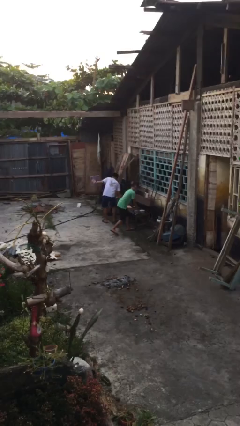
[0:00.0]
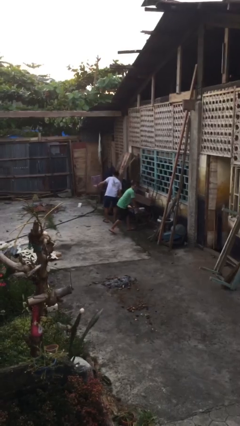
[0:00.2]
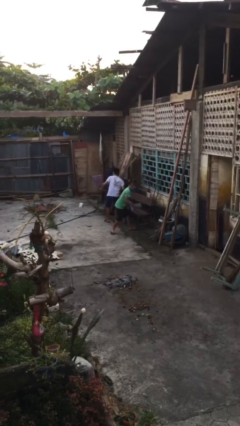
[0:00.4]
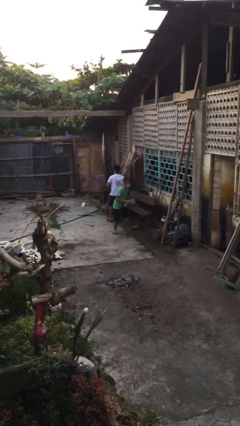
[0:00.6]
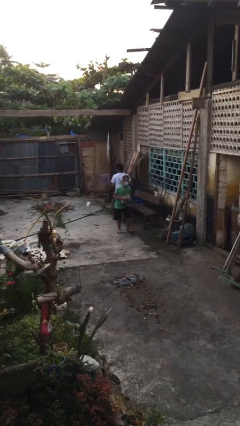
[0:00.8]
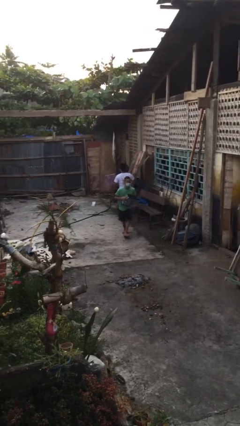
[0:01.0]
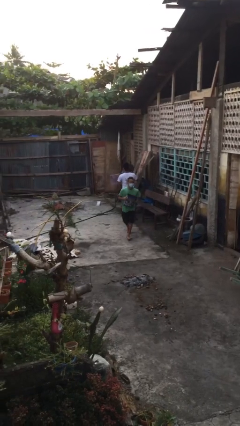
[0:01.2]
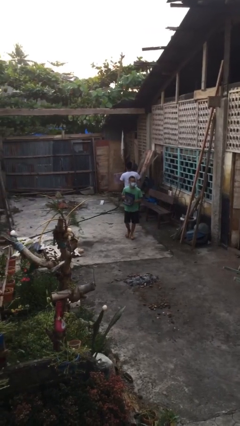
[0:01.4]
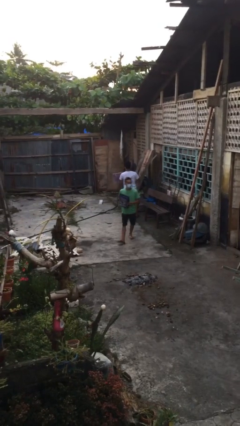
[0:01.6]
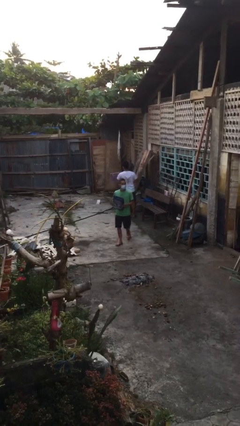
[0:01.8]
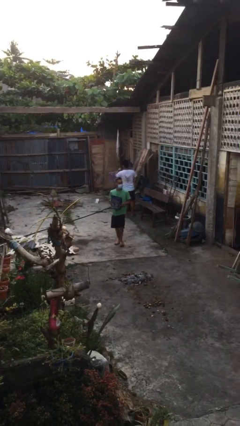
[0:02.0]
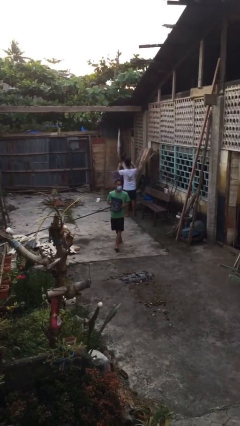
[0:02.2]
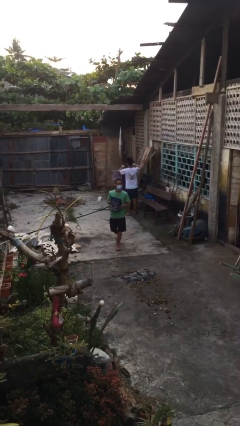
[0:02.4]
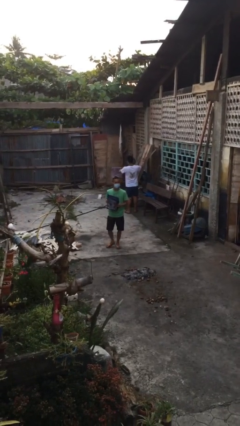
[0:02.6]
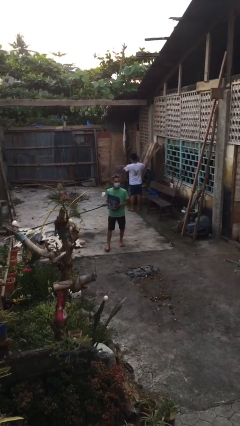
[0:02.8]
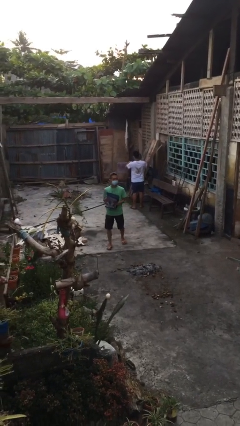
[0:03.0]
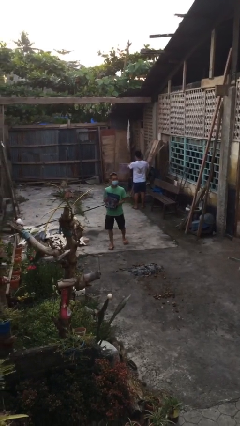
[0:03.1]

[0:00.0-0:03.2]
person steals object from person

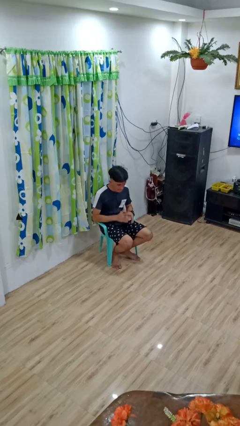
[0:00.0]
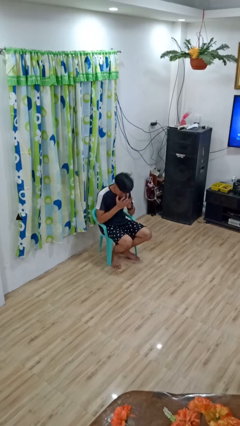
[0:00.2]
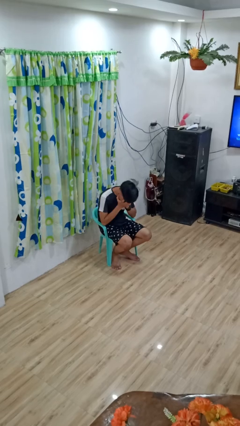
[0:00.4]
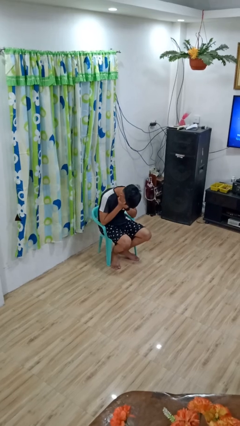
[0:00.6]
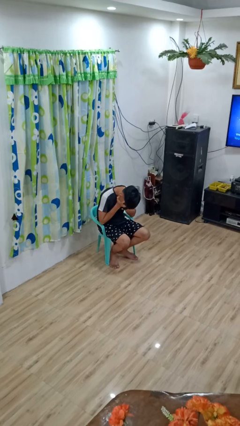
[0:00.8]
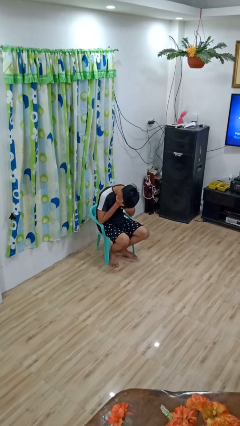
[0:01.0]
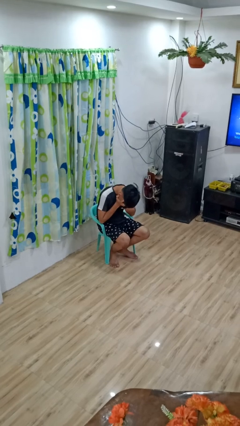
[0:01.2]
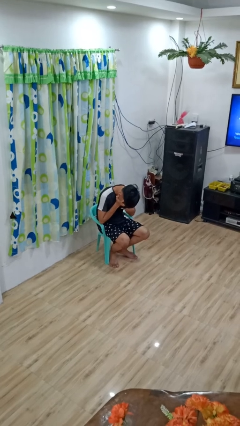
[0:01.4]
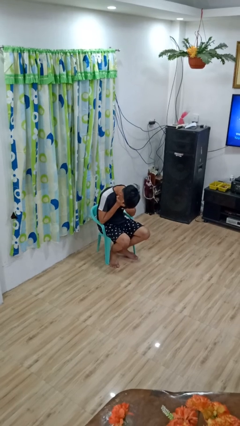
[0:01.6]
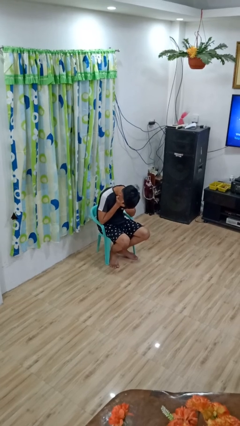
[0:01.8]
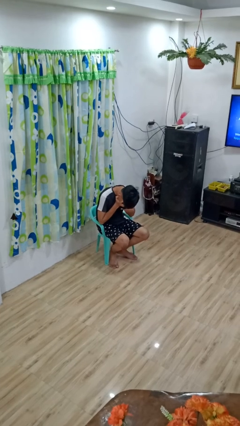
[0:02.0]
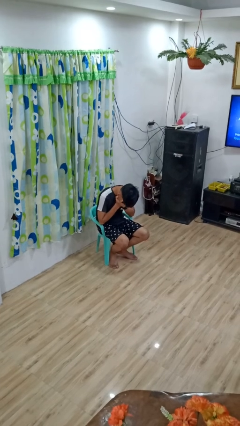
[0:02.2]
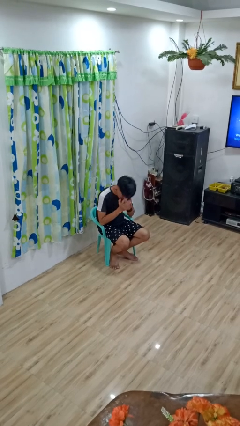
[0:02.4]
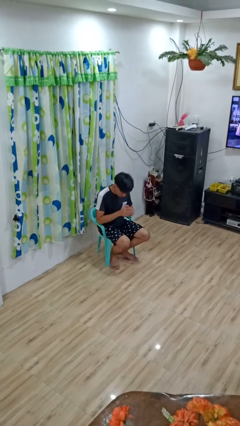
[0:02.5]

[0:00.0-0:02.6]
person covers face with hands

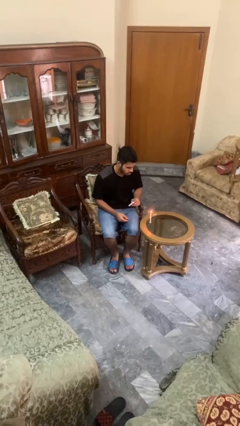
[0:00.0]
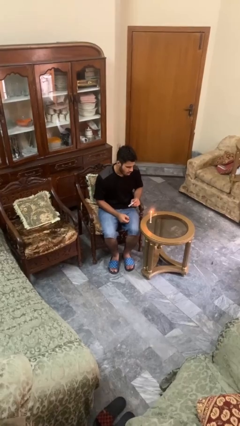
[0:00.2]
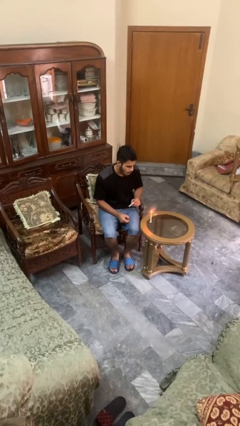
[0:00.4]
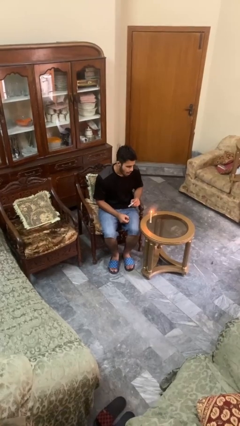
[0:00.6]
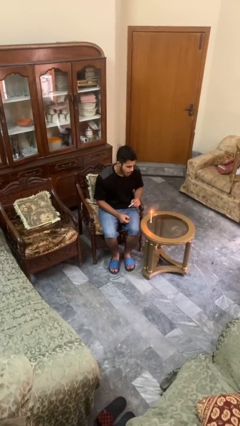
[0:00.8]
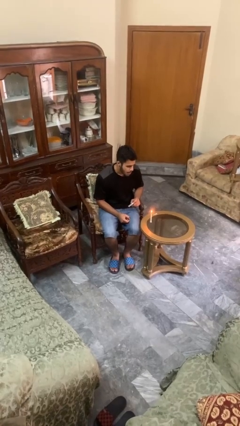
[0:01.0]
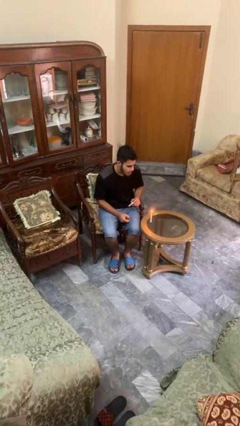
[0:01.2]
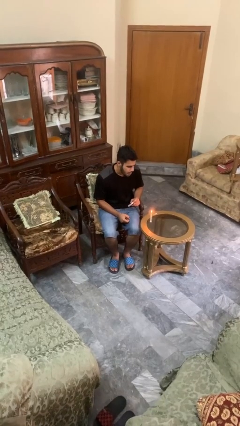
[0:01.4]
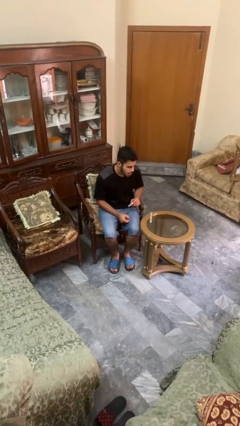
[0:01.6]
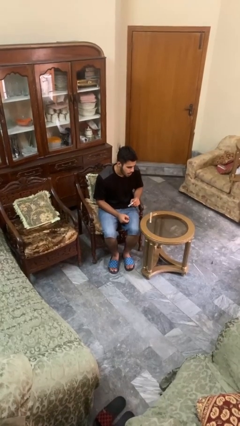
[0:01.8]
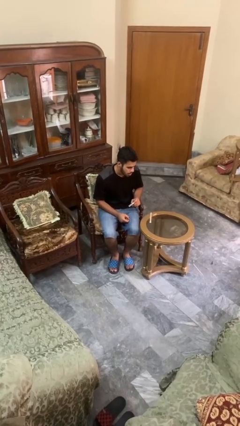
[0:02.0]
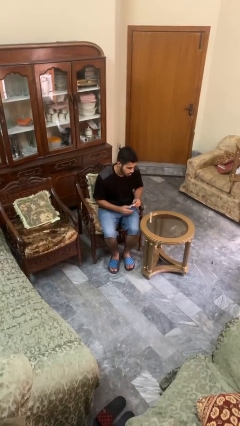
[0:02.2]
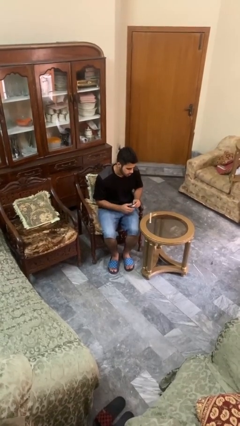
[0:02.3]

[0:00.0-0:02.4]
person extinguishes candle

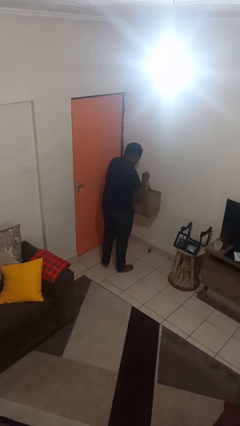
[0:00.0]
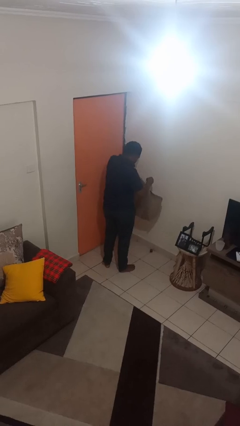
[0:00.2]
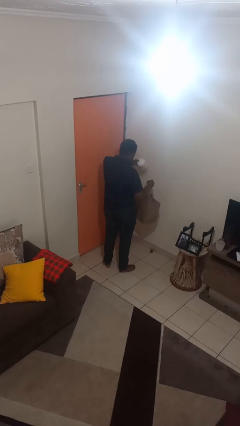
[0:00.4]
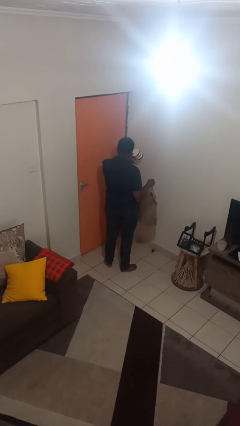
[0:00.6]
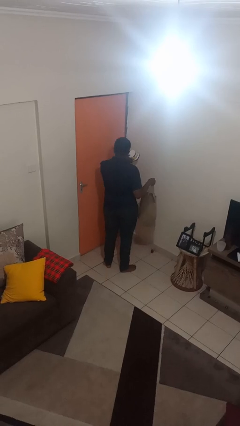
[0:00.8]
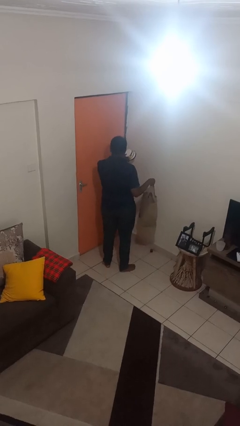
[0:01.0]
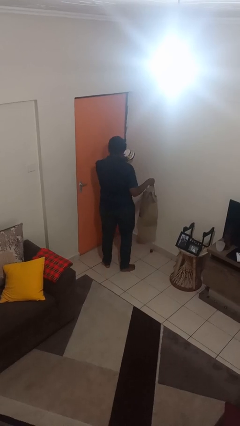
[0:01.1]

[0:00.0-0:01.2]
person takes object from bag

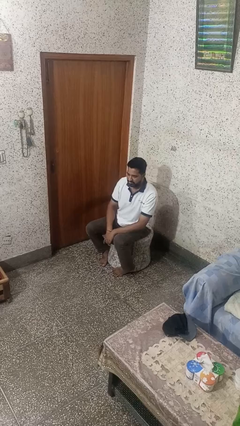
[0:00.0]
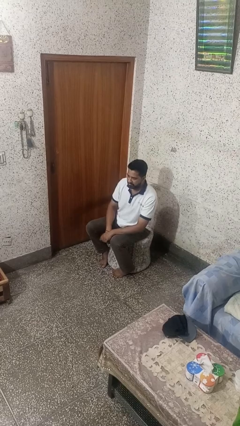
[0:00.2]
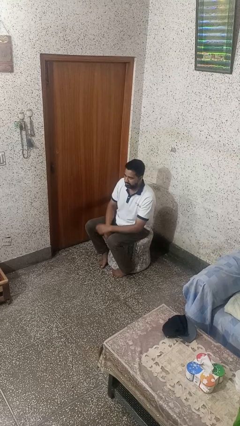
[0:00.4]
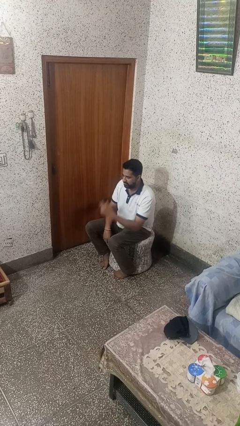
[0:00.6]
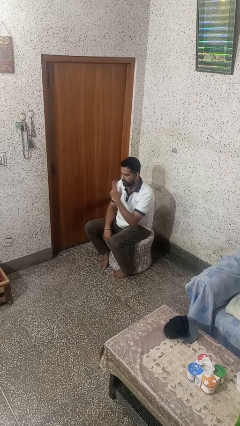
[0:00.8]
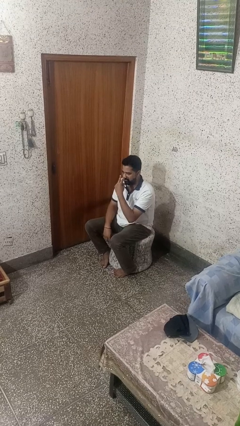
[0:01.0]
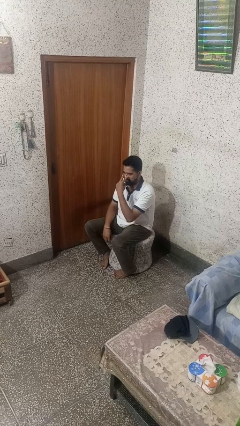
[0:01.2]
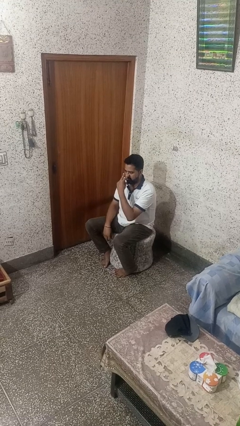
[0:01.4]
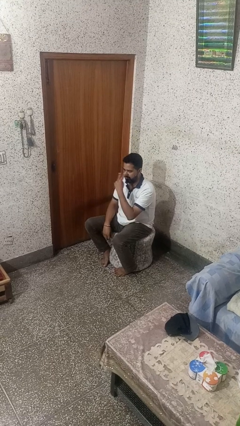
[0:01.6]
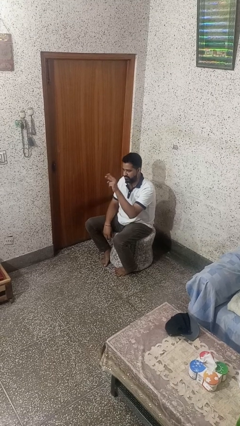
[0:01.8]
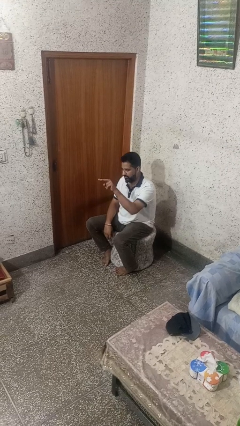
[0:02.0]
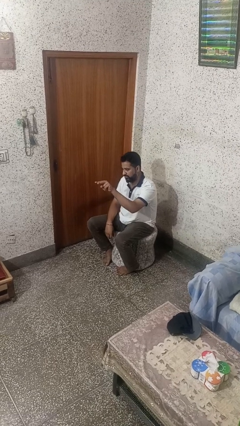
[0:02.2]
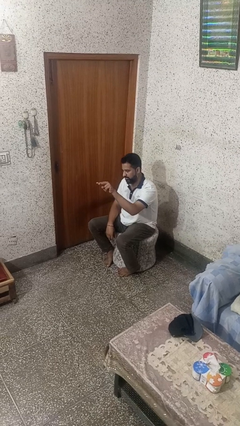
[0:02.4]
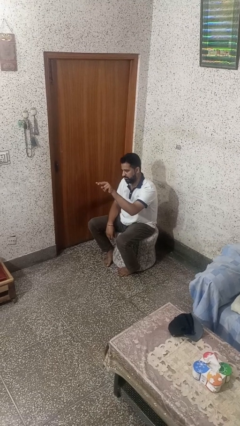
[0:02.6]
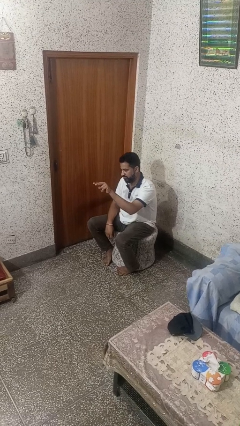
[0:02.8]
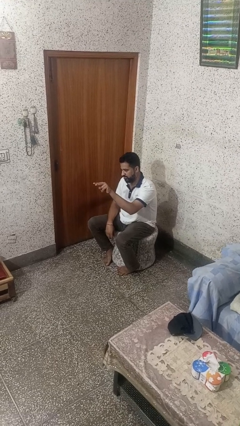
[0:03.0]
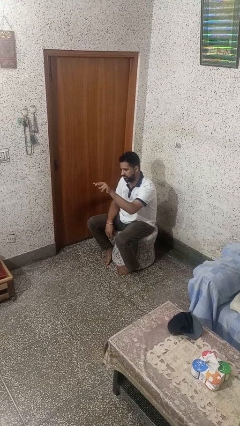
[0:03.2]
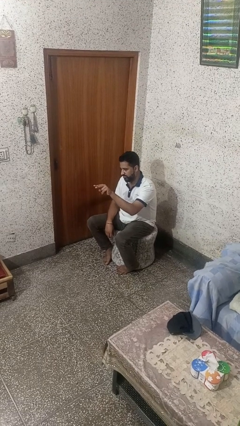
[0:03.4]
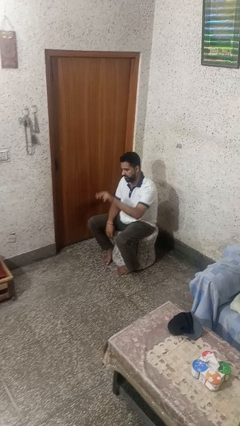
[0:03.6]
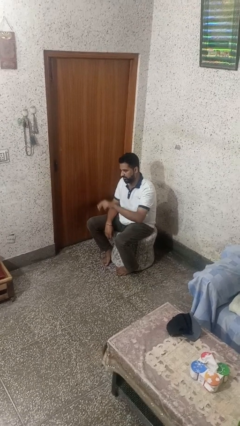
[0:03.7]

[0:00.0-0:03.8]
person gestures watch closely

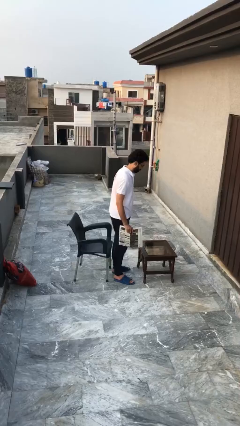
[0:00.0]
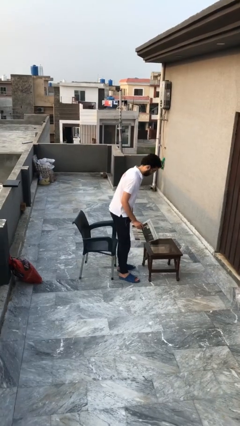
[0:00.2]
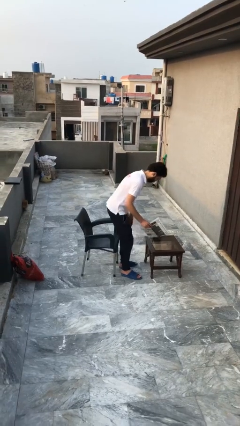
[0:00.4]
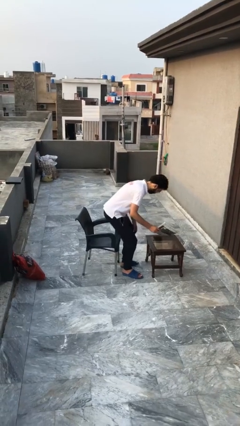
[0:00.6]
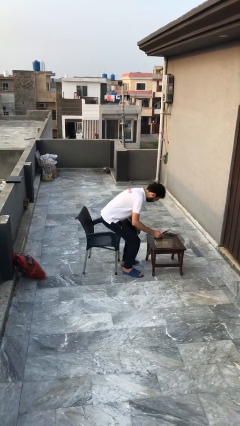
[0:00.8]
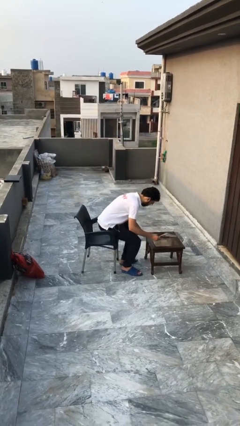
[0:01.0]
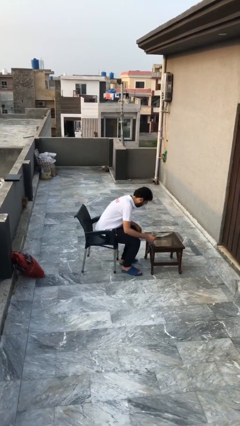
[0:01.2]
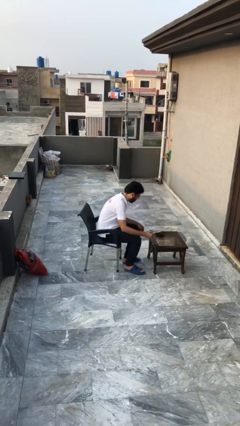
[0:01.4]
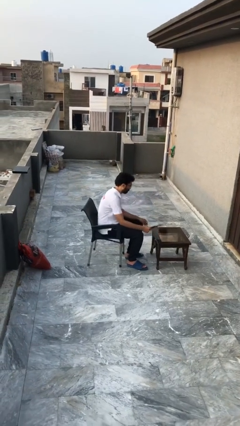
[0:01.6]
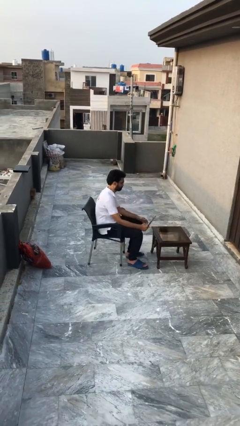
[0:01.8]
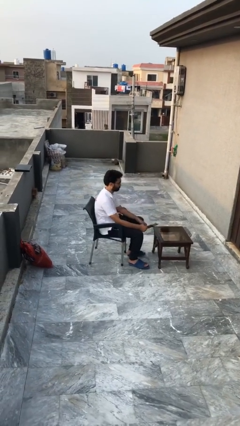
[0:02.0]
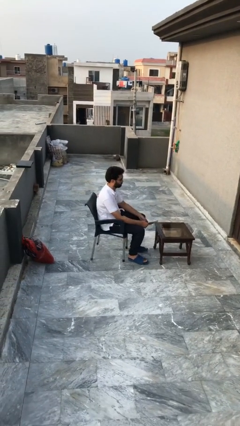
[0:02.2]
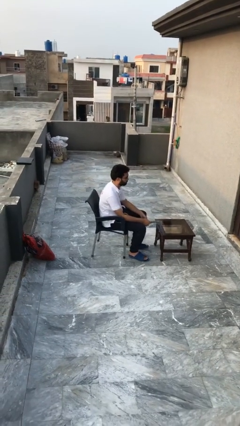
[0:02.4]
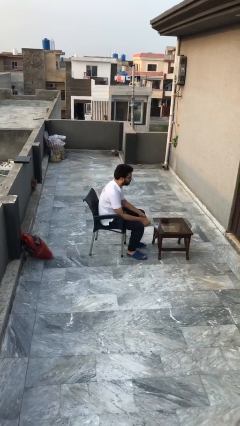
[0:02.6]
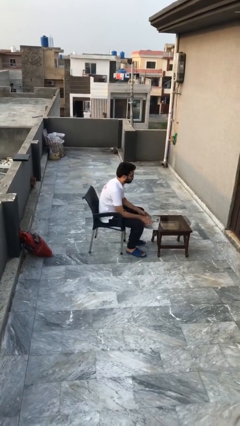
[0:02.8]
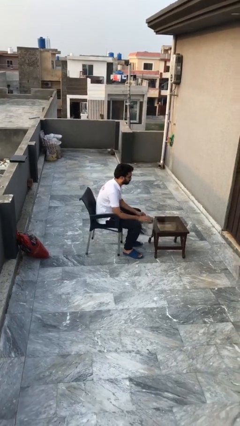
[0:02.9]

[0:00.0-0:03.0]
person sits down

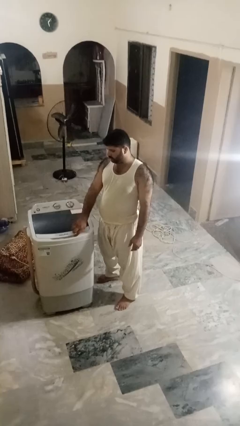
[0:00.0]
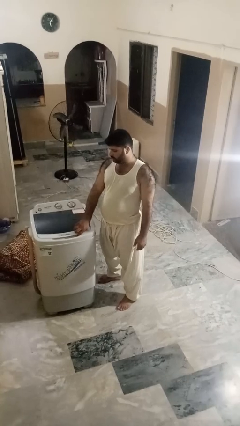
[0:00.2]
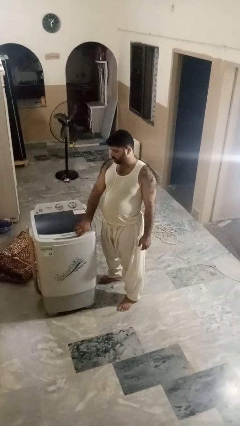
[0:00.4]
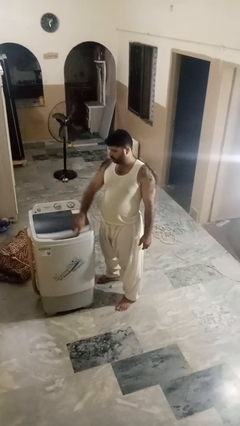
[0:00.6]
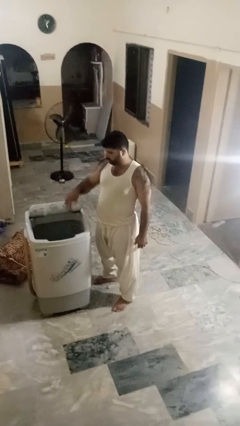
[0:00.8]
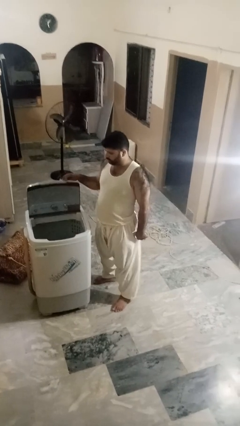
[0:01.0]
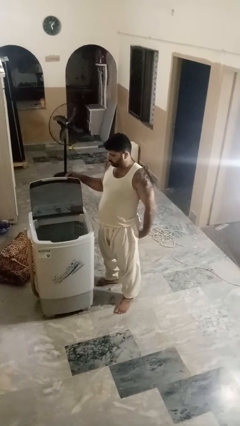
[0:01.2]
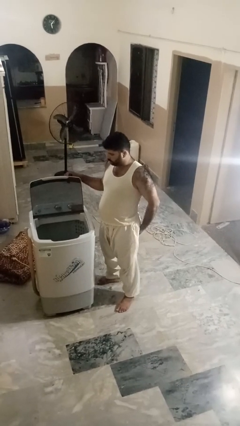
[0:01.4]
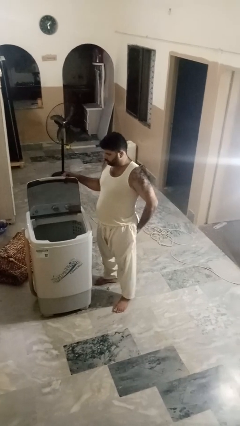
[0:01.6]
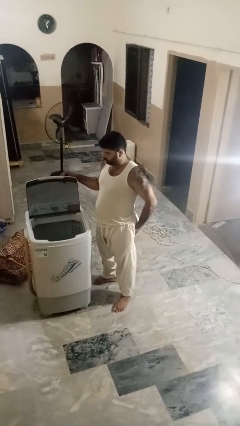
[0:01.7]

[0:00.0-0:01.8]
person opens clothes washer
